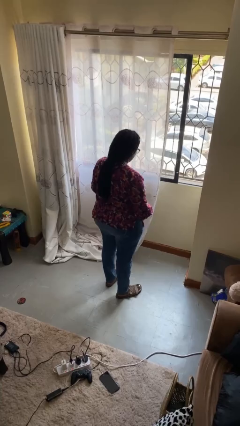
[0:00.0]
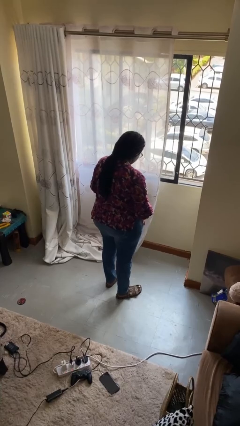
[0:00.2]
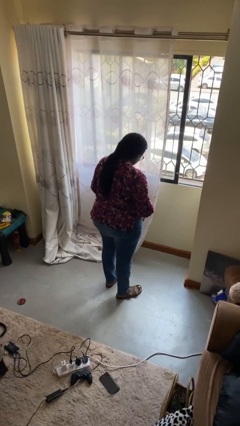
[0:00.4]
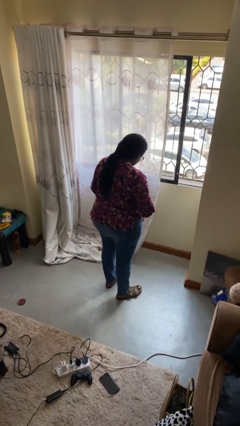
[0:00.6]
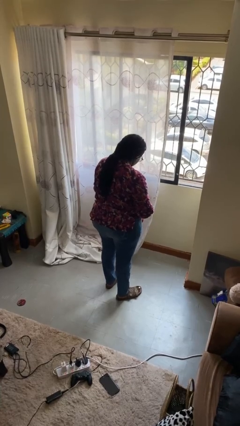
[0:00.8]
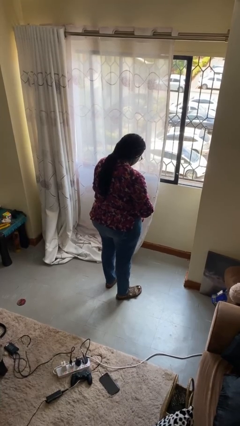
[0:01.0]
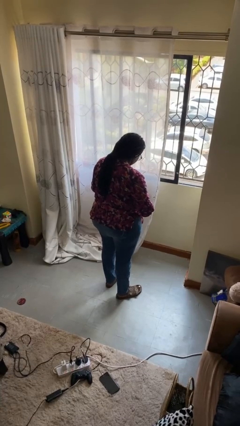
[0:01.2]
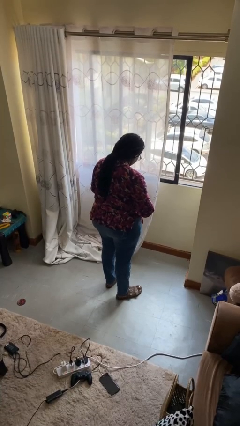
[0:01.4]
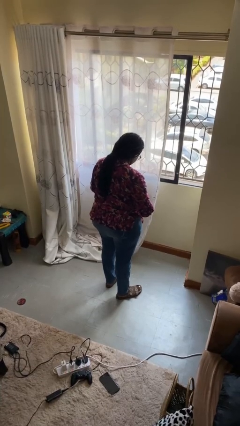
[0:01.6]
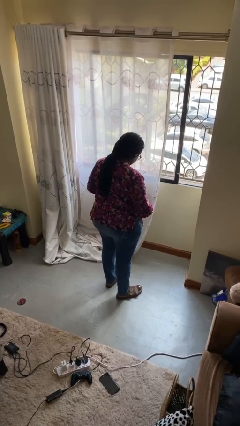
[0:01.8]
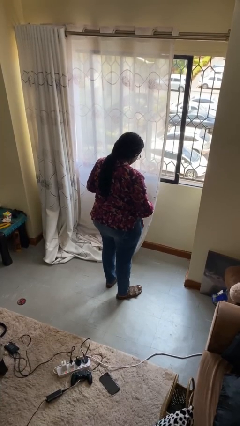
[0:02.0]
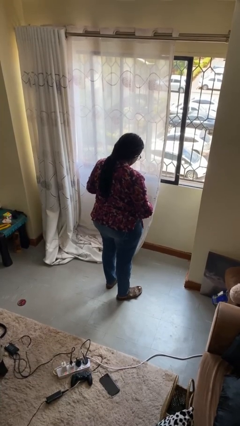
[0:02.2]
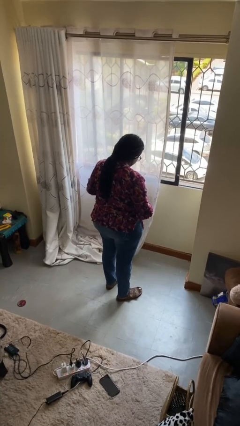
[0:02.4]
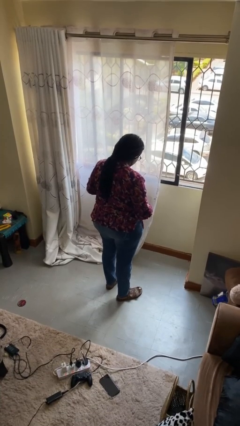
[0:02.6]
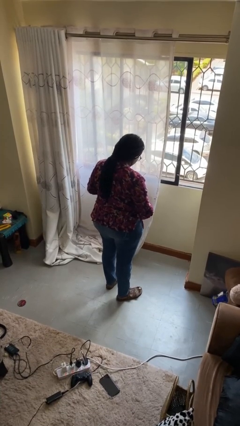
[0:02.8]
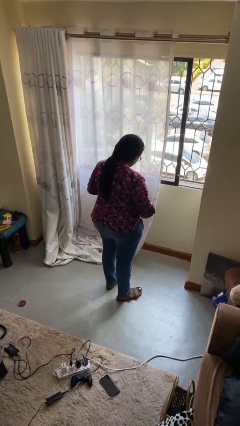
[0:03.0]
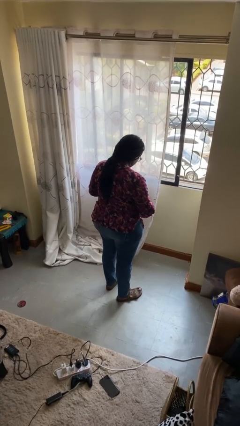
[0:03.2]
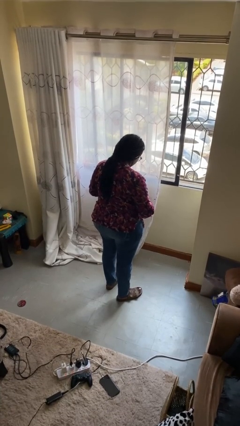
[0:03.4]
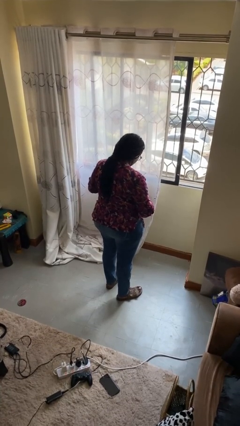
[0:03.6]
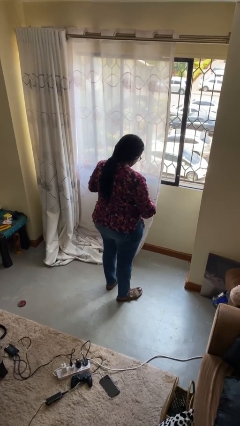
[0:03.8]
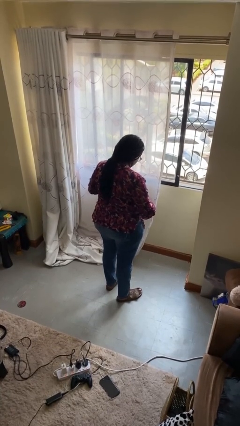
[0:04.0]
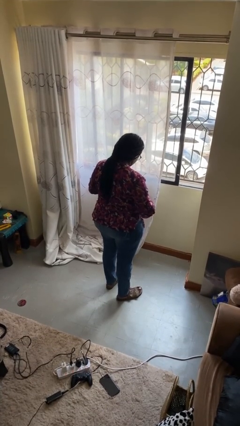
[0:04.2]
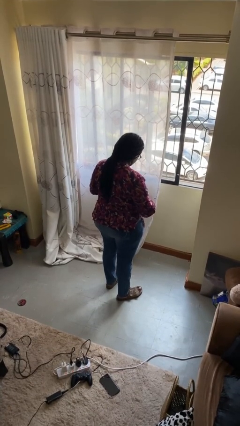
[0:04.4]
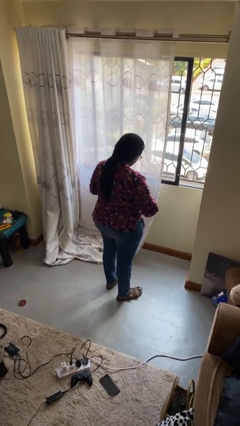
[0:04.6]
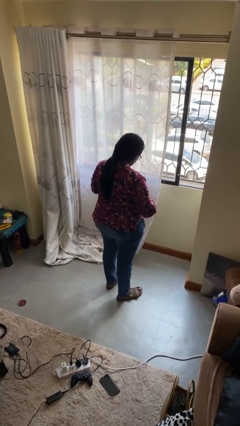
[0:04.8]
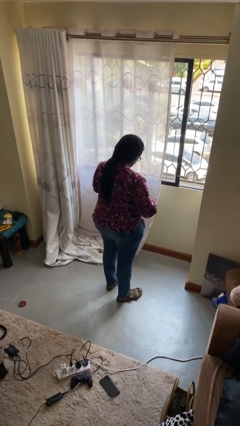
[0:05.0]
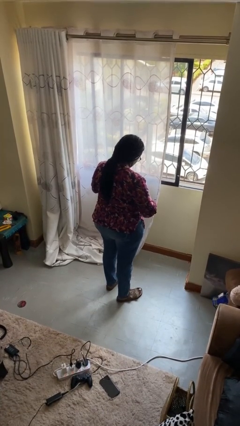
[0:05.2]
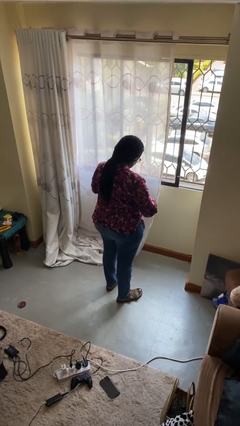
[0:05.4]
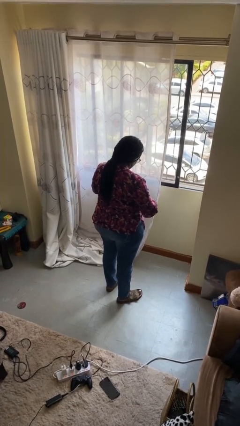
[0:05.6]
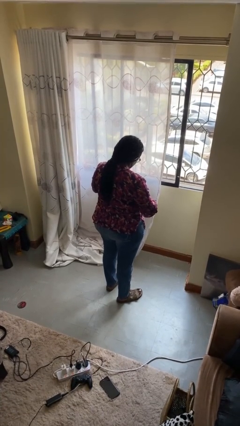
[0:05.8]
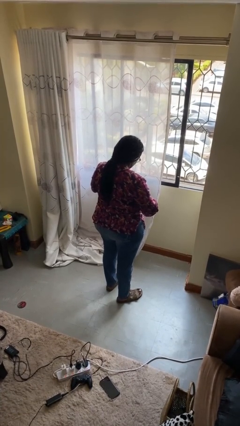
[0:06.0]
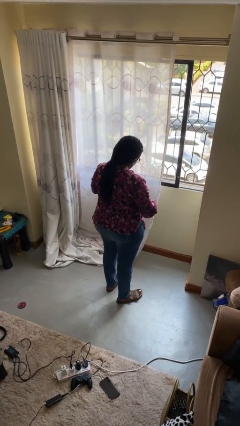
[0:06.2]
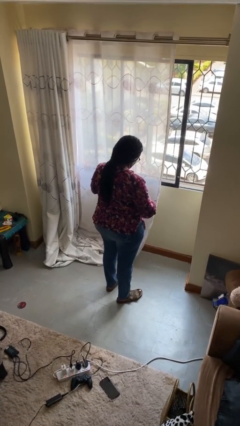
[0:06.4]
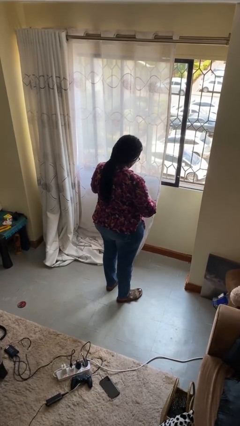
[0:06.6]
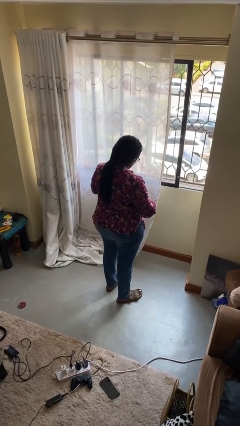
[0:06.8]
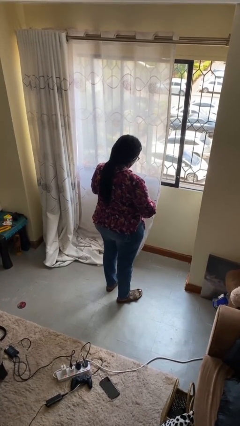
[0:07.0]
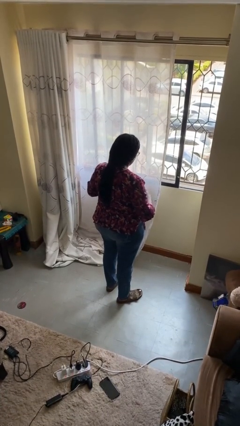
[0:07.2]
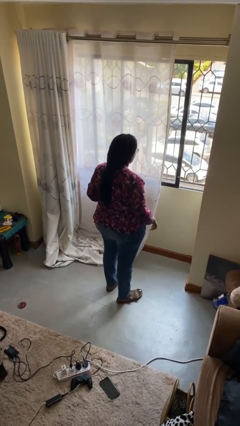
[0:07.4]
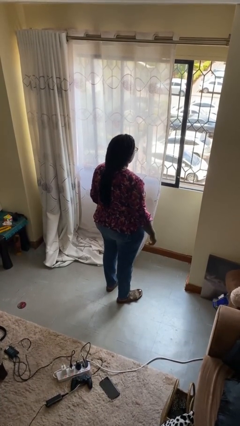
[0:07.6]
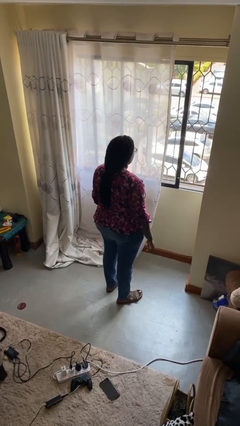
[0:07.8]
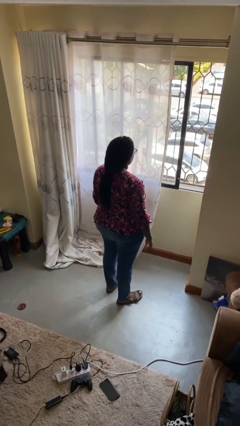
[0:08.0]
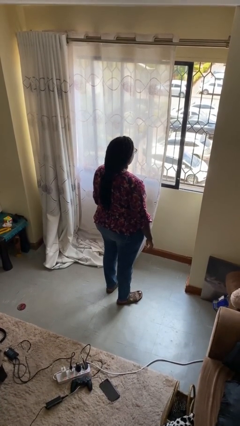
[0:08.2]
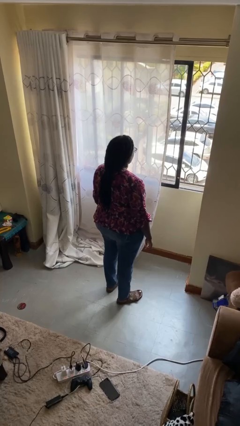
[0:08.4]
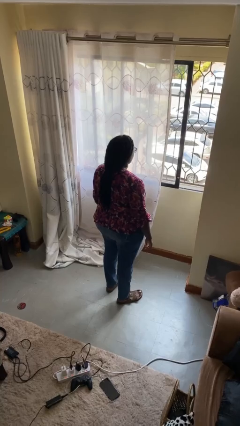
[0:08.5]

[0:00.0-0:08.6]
person buttons shirt

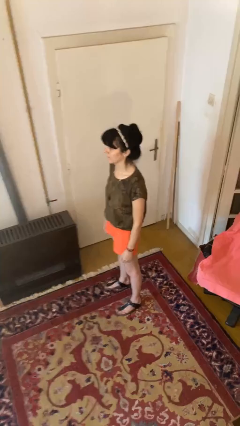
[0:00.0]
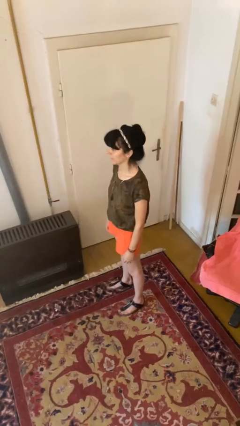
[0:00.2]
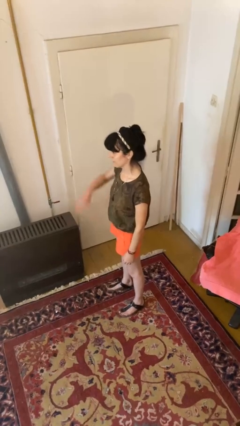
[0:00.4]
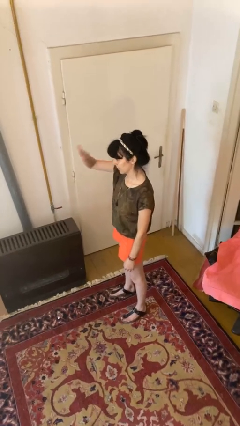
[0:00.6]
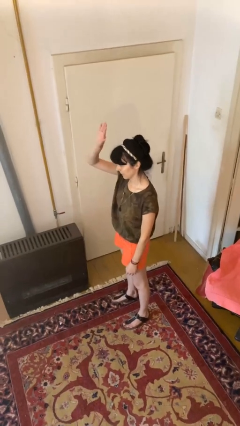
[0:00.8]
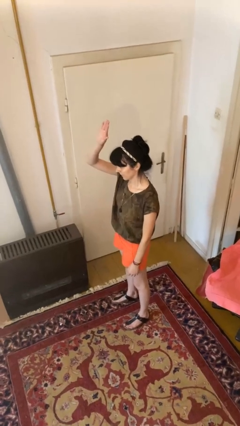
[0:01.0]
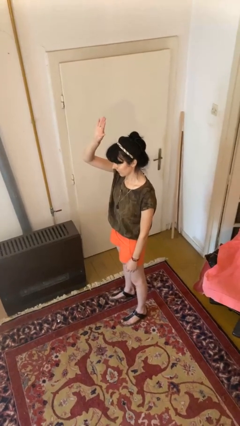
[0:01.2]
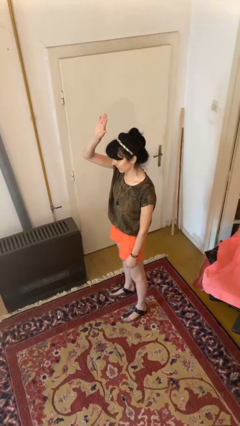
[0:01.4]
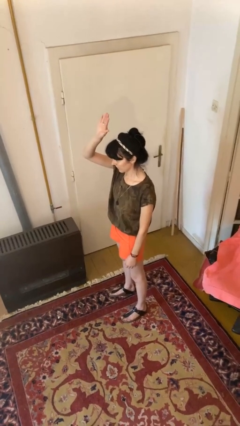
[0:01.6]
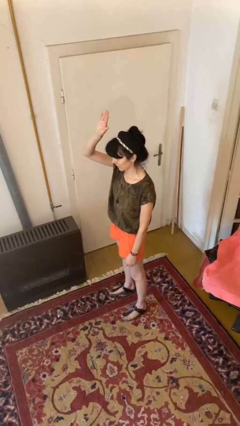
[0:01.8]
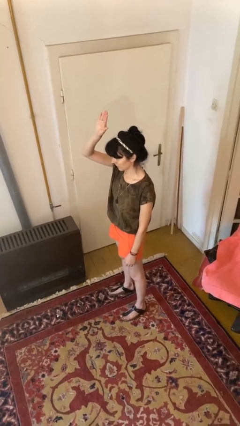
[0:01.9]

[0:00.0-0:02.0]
person gestures raise hand

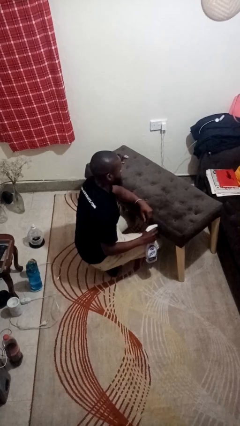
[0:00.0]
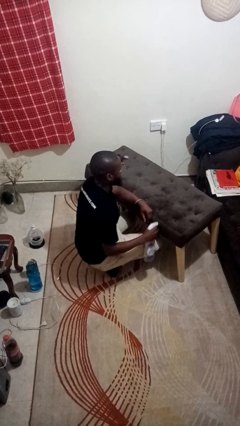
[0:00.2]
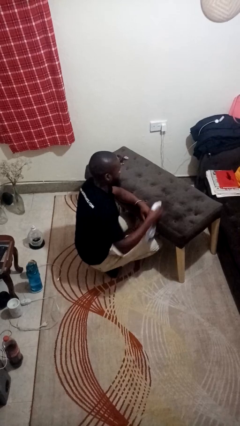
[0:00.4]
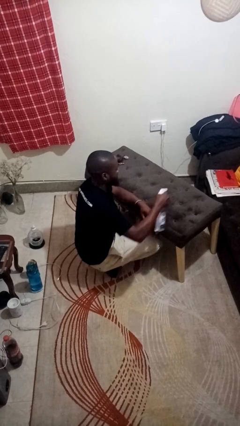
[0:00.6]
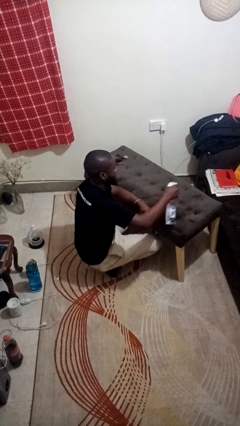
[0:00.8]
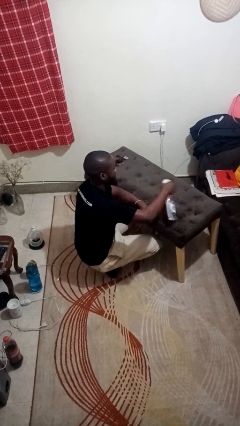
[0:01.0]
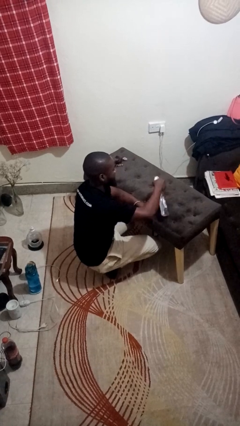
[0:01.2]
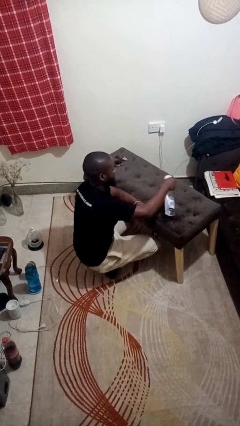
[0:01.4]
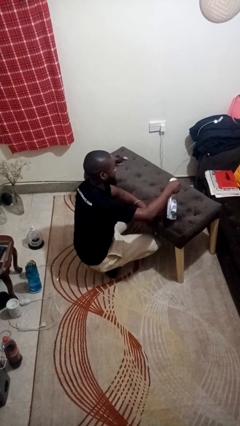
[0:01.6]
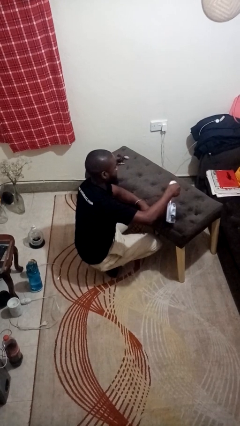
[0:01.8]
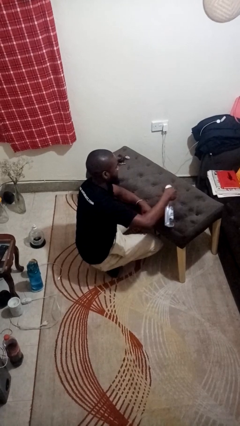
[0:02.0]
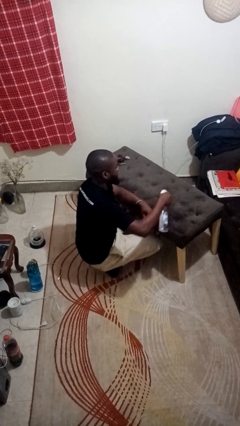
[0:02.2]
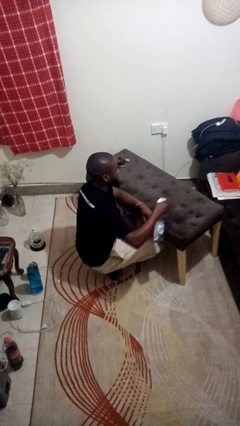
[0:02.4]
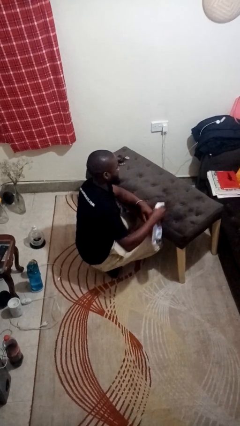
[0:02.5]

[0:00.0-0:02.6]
person sprays from bottle

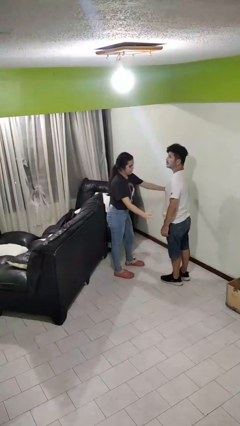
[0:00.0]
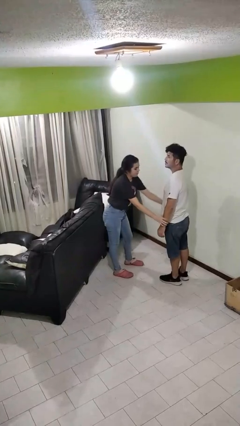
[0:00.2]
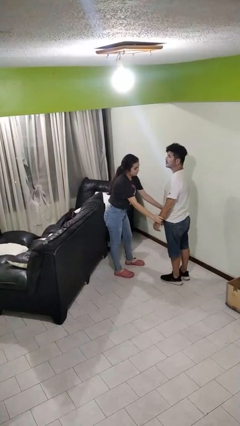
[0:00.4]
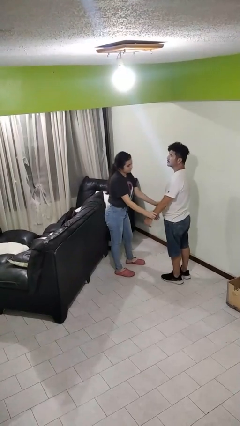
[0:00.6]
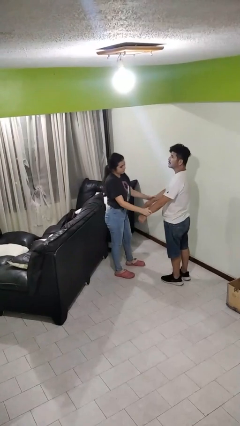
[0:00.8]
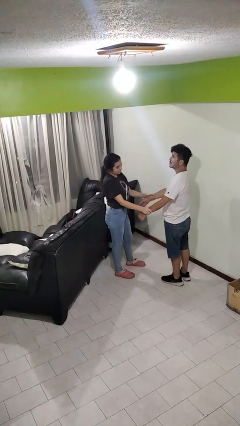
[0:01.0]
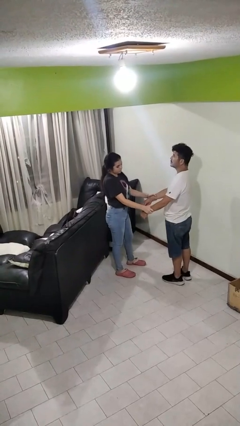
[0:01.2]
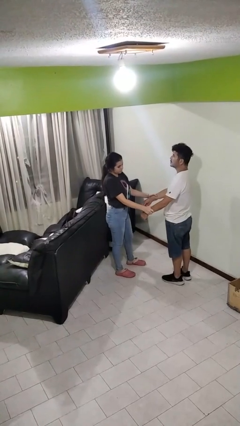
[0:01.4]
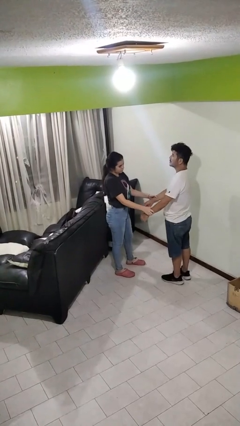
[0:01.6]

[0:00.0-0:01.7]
person grabs person by forearm

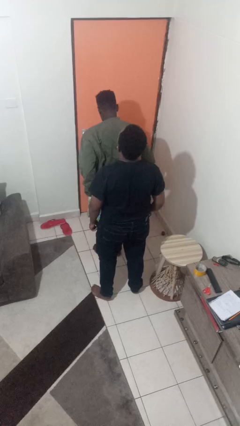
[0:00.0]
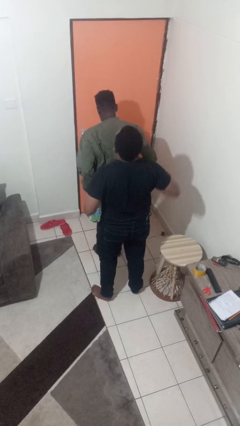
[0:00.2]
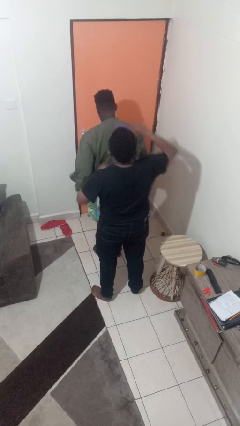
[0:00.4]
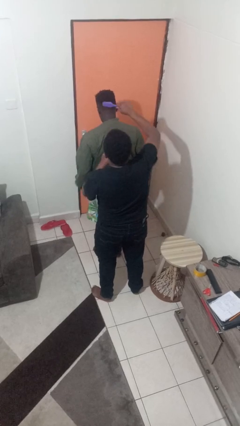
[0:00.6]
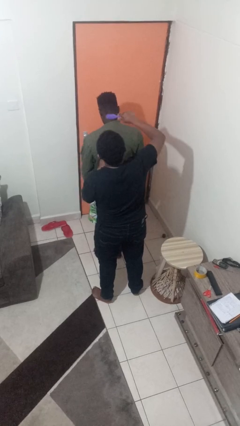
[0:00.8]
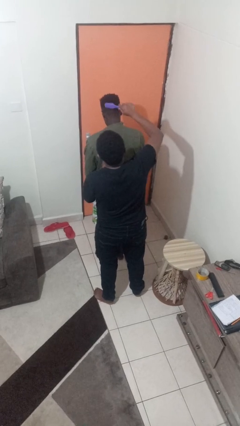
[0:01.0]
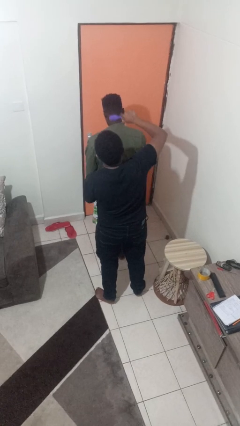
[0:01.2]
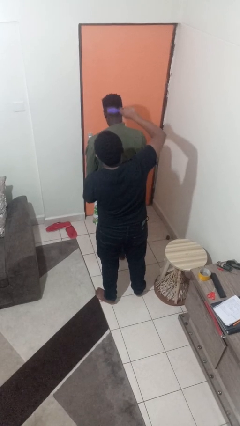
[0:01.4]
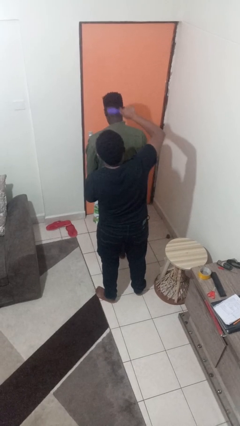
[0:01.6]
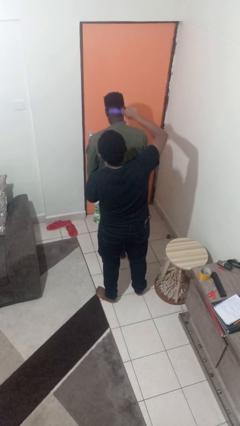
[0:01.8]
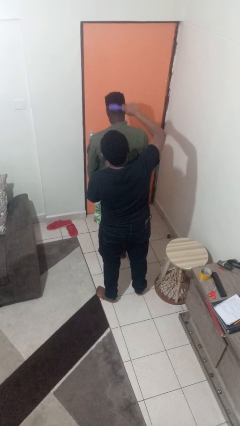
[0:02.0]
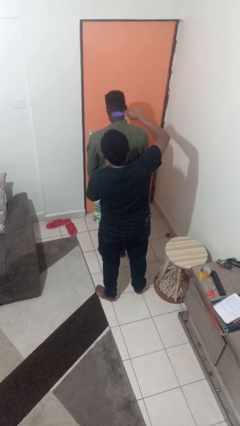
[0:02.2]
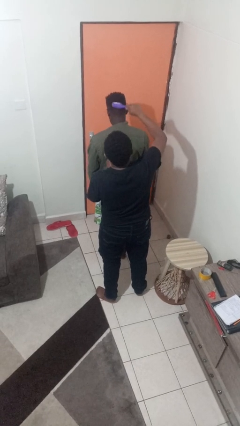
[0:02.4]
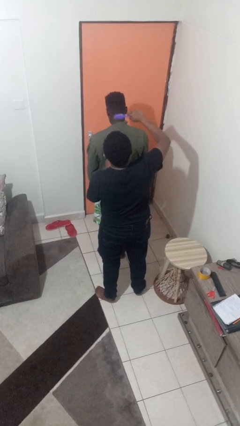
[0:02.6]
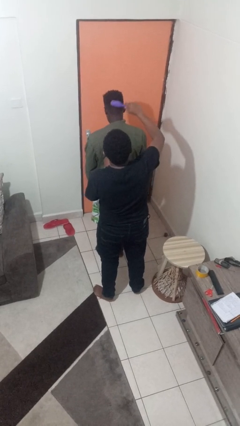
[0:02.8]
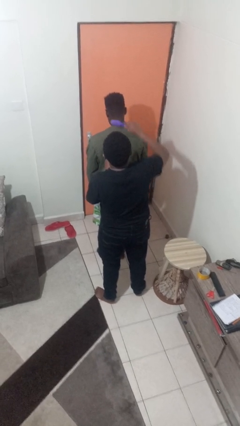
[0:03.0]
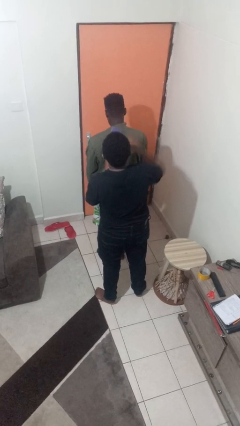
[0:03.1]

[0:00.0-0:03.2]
person brushes hair of person
